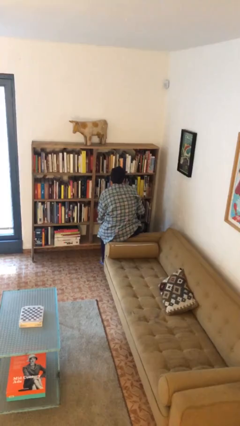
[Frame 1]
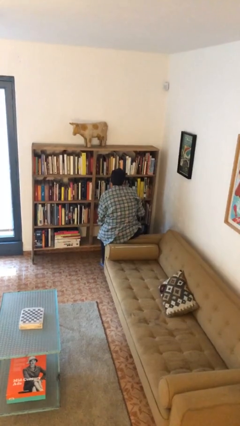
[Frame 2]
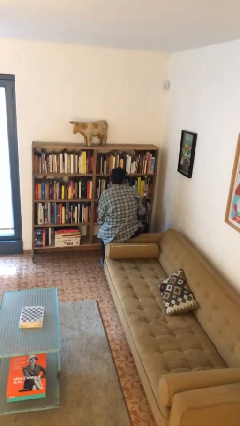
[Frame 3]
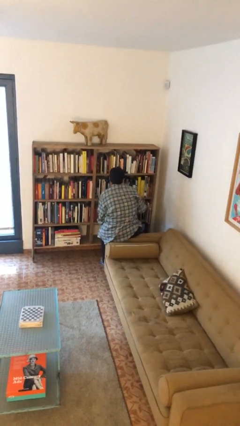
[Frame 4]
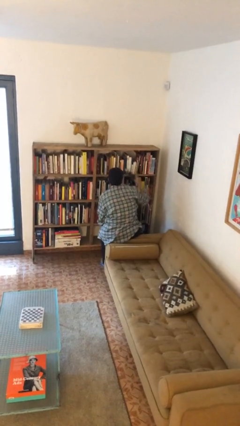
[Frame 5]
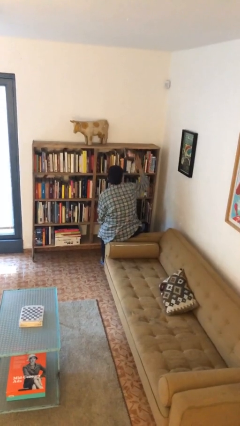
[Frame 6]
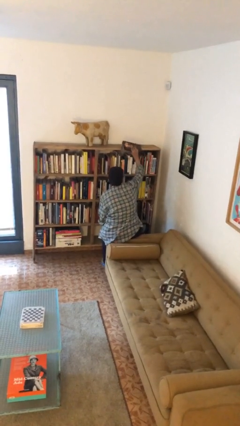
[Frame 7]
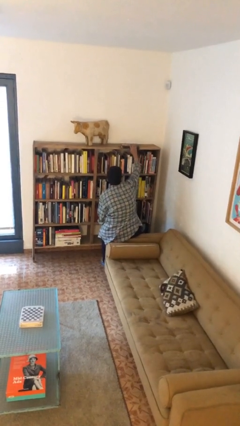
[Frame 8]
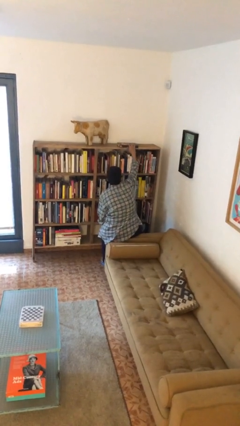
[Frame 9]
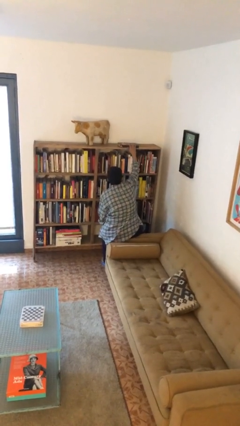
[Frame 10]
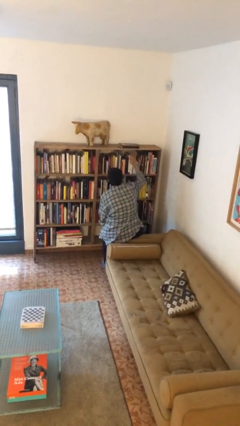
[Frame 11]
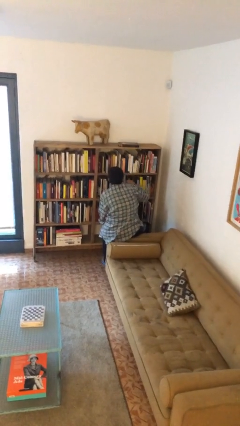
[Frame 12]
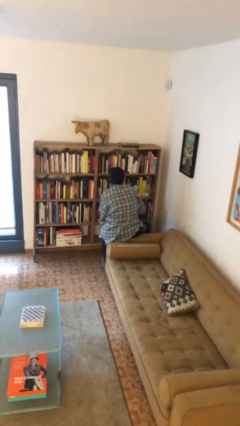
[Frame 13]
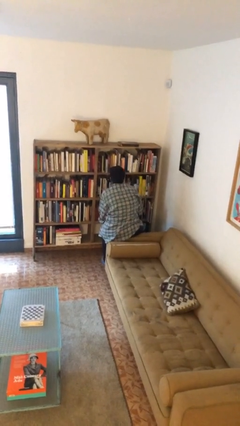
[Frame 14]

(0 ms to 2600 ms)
person puts down object on shelf

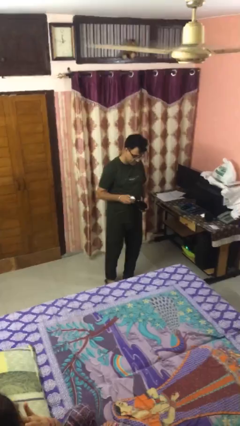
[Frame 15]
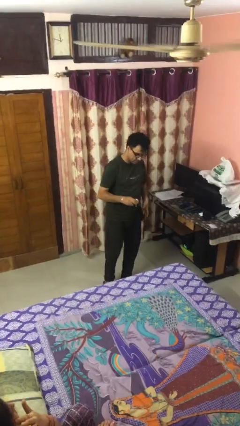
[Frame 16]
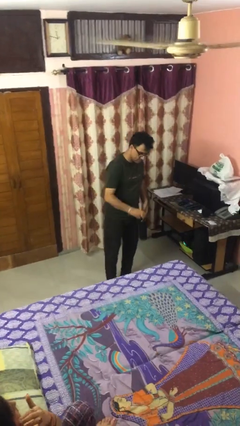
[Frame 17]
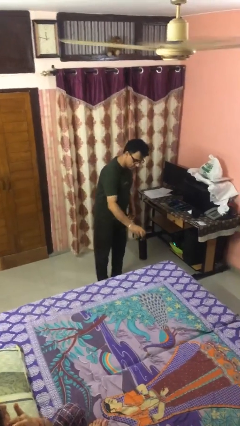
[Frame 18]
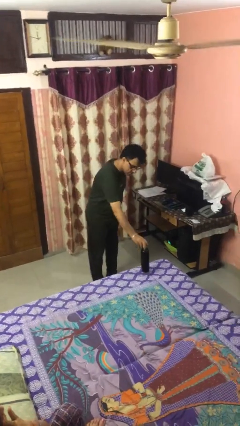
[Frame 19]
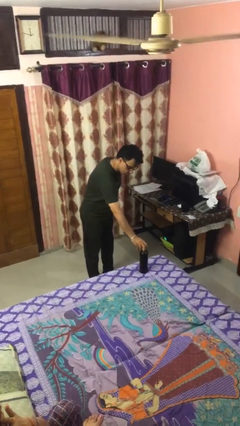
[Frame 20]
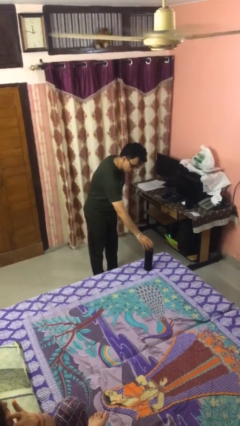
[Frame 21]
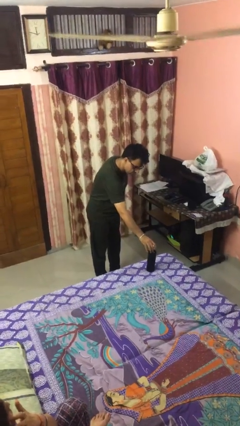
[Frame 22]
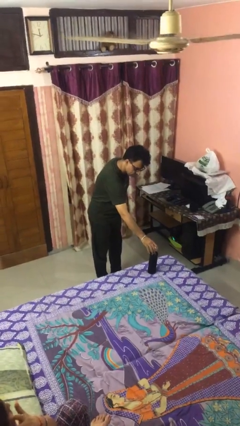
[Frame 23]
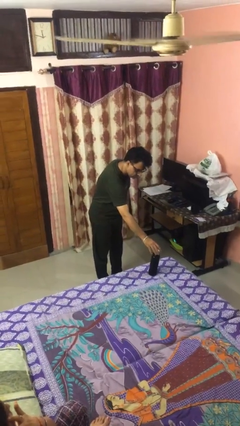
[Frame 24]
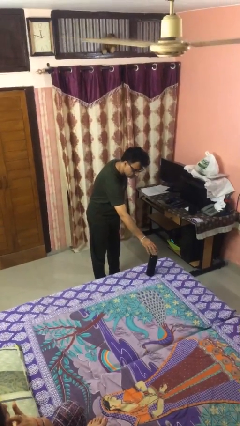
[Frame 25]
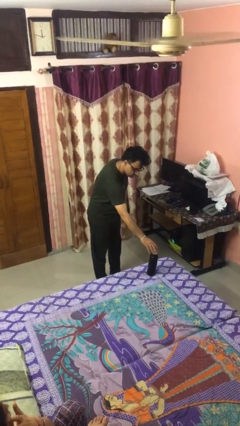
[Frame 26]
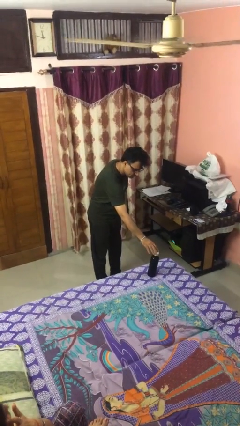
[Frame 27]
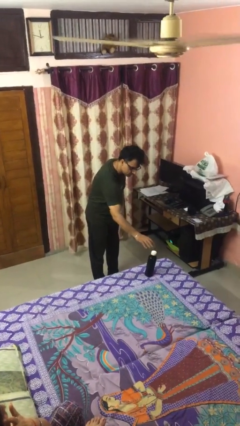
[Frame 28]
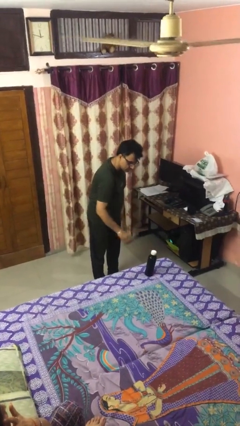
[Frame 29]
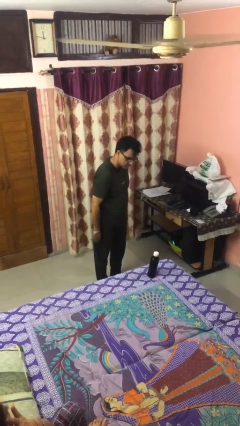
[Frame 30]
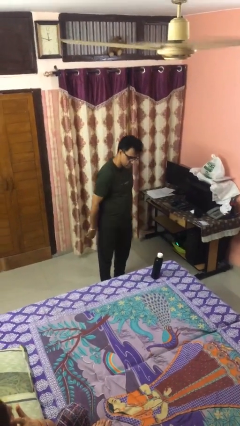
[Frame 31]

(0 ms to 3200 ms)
person puts down object on bed

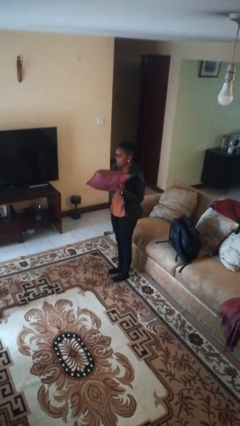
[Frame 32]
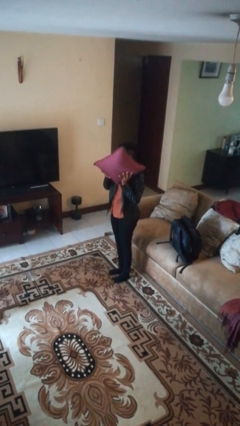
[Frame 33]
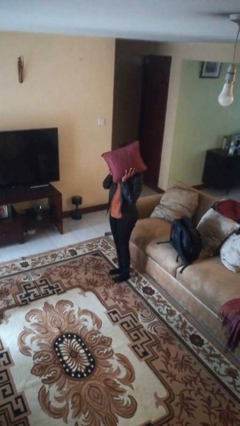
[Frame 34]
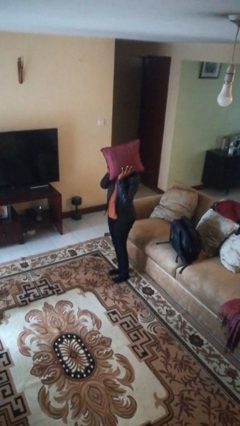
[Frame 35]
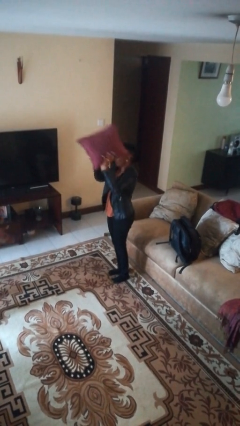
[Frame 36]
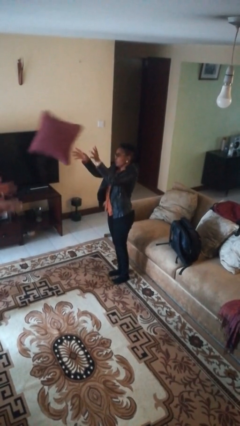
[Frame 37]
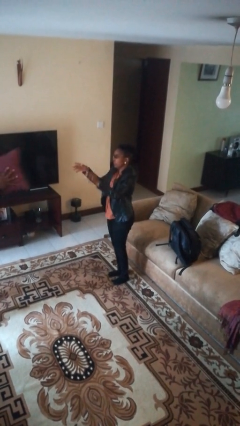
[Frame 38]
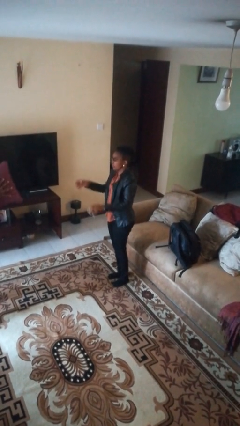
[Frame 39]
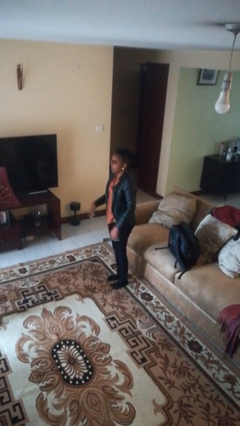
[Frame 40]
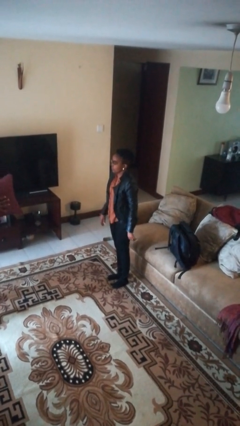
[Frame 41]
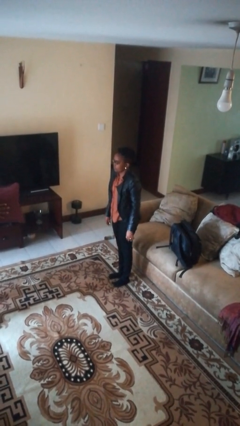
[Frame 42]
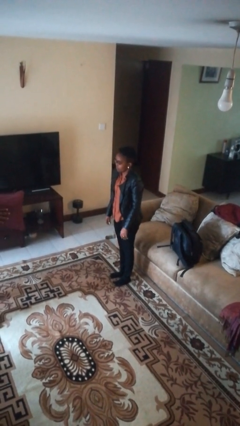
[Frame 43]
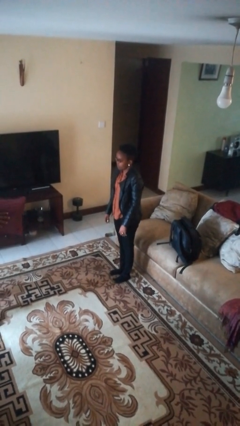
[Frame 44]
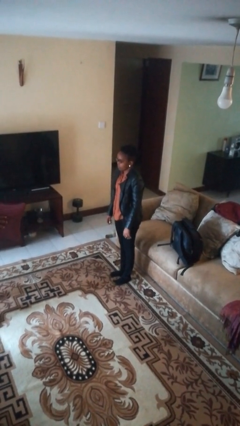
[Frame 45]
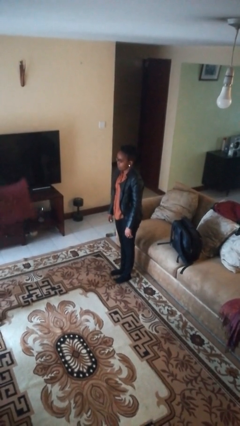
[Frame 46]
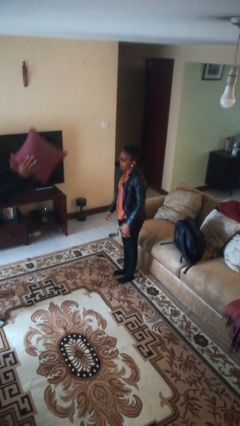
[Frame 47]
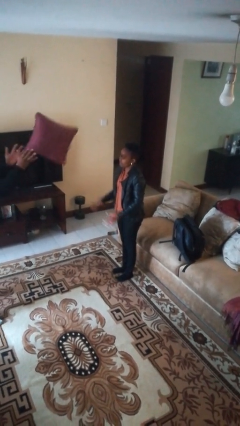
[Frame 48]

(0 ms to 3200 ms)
person throws object to person

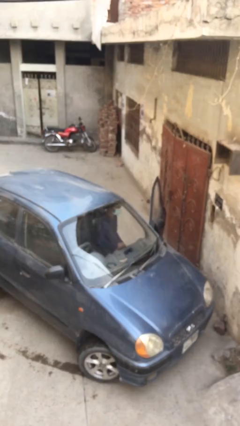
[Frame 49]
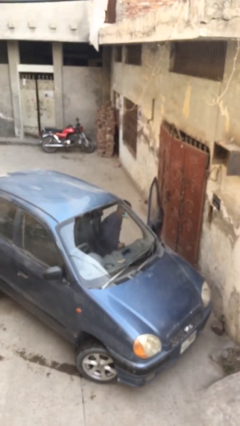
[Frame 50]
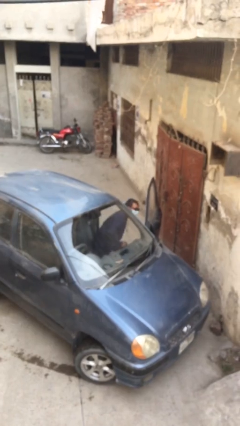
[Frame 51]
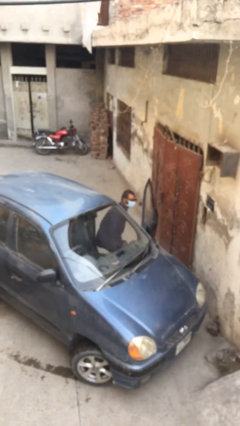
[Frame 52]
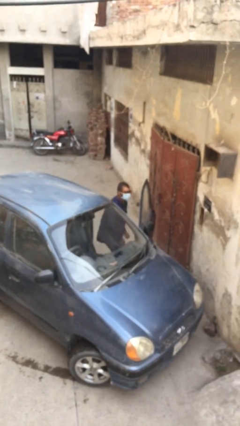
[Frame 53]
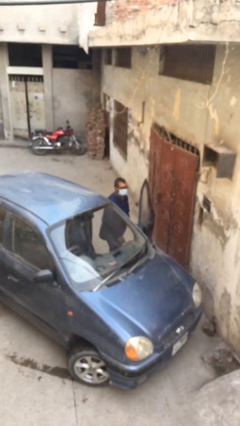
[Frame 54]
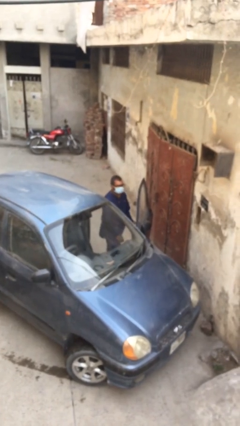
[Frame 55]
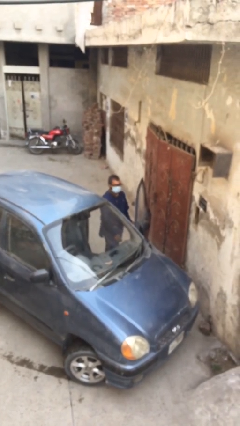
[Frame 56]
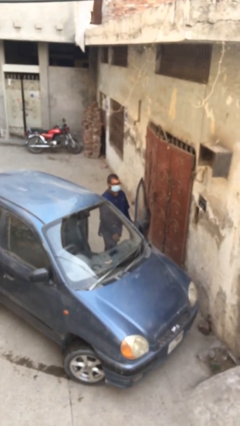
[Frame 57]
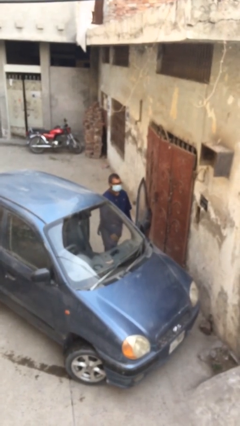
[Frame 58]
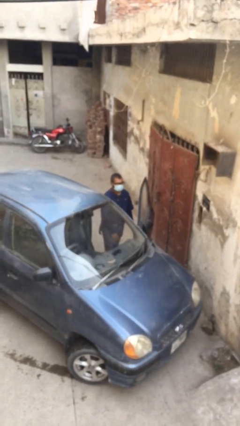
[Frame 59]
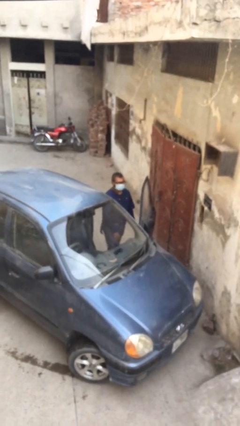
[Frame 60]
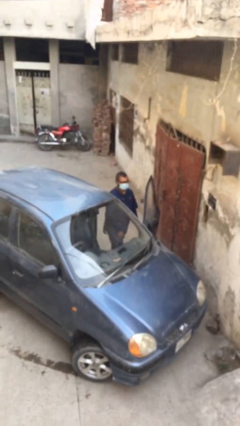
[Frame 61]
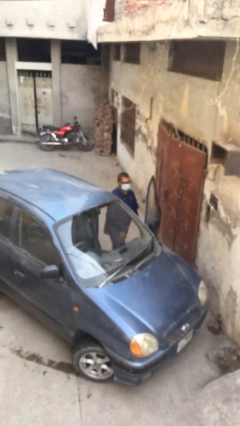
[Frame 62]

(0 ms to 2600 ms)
person exits car

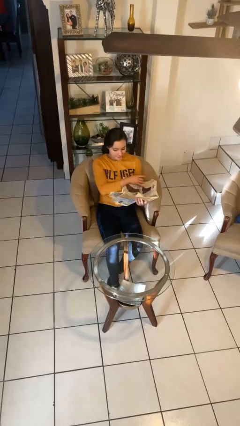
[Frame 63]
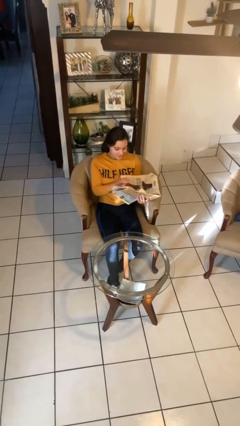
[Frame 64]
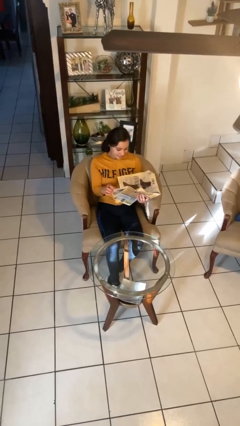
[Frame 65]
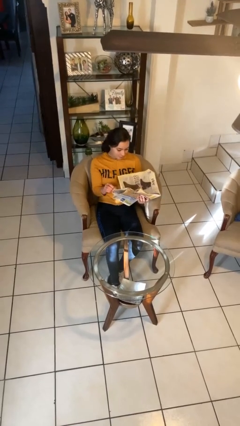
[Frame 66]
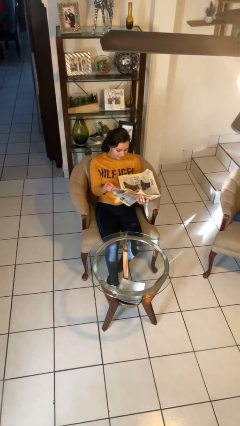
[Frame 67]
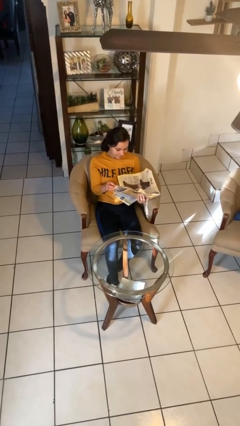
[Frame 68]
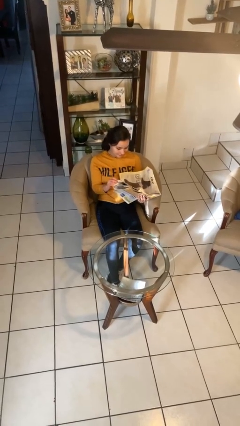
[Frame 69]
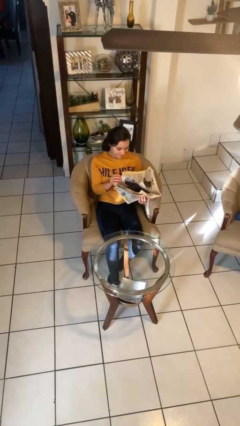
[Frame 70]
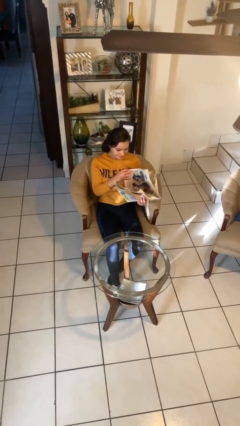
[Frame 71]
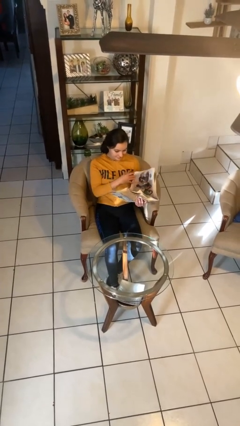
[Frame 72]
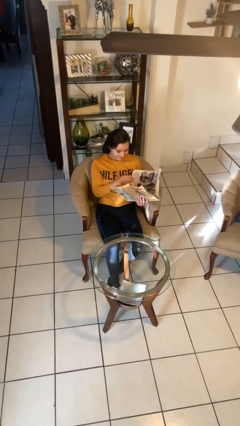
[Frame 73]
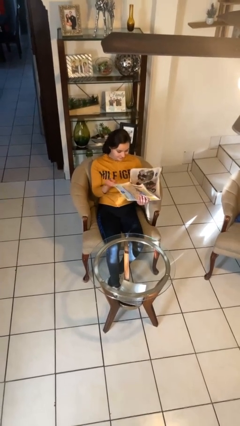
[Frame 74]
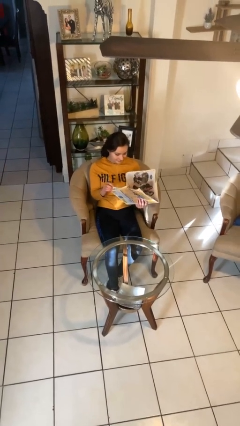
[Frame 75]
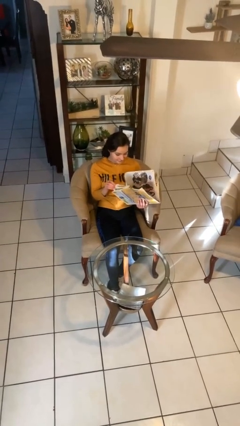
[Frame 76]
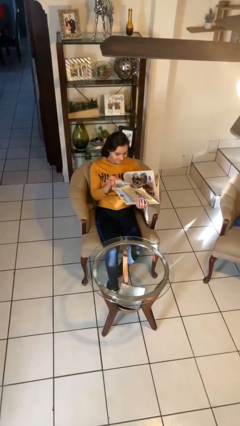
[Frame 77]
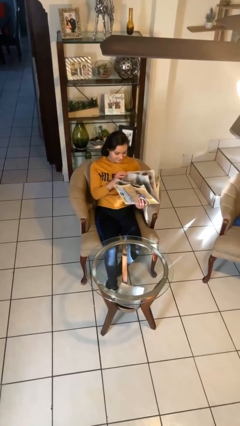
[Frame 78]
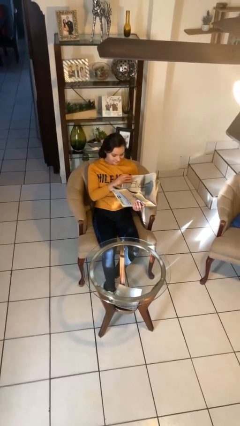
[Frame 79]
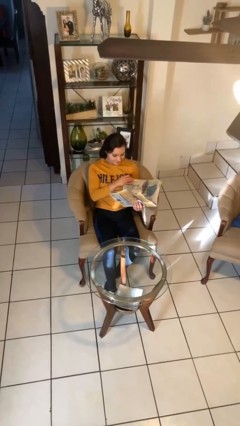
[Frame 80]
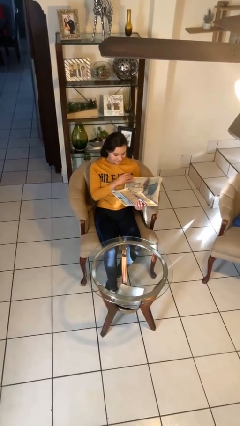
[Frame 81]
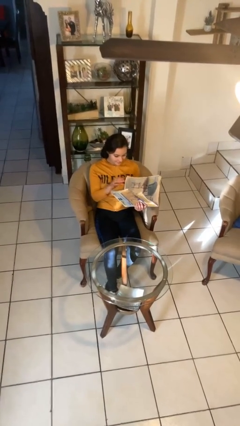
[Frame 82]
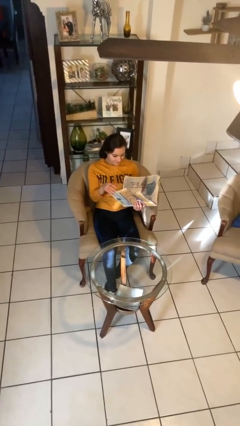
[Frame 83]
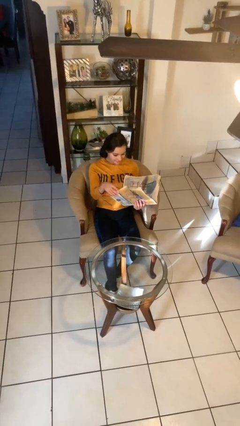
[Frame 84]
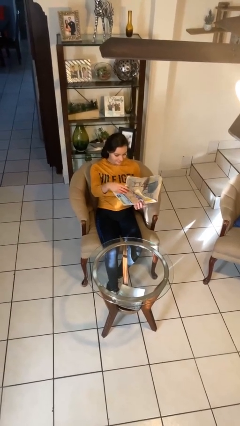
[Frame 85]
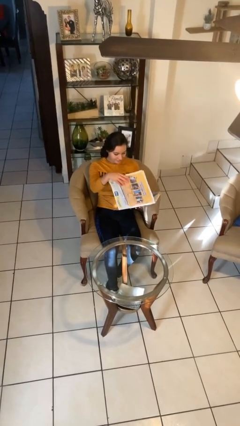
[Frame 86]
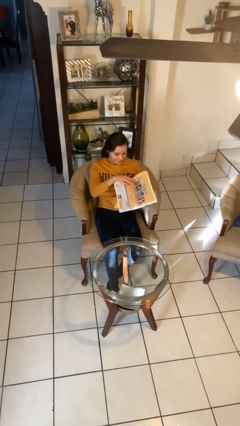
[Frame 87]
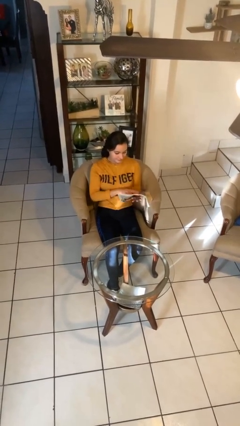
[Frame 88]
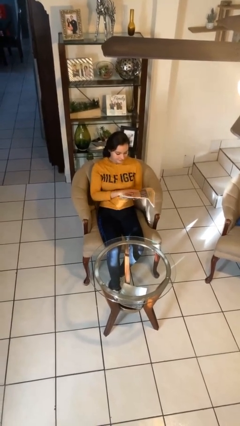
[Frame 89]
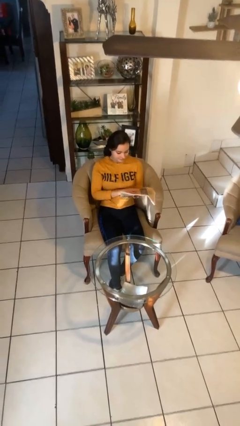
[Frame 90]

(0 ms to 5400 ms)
person reads newspaper

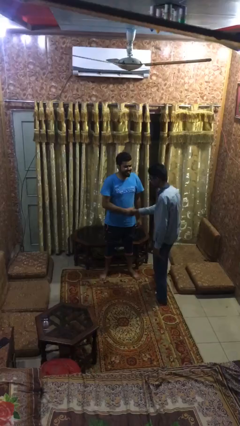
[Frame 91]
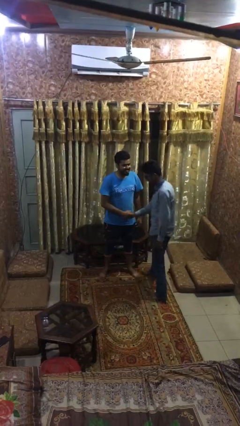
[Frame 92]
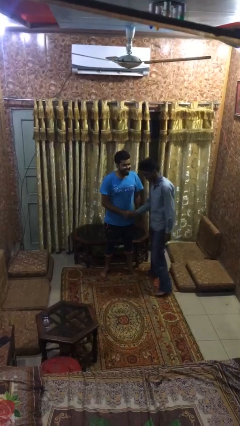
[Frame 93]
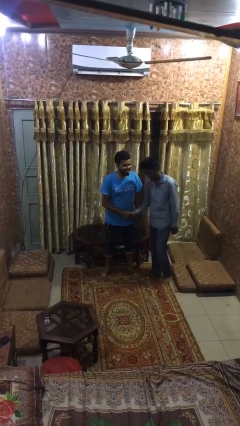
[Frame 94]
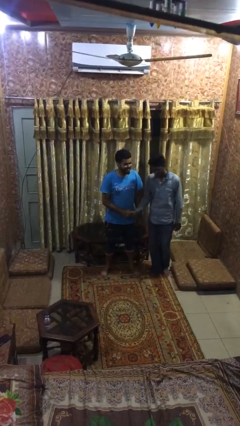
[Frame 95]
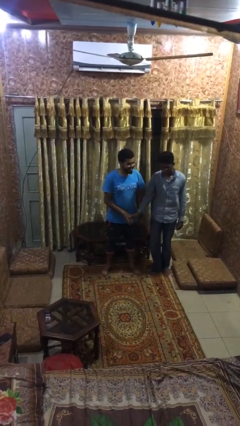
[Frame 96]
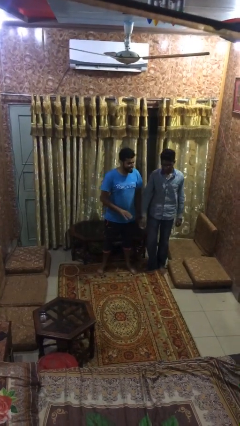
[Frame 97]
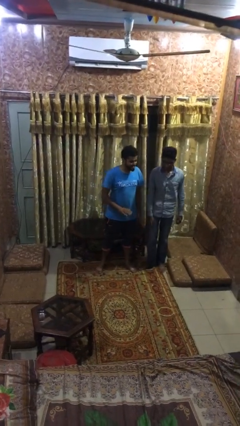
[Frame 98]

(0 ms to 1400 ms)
person shakes hand
